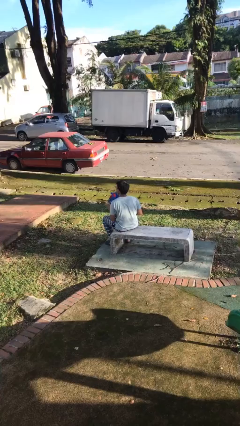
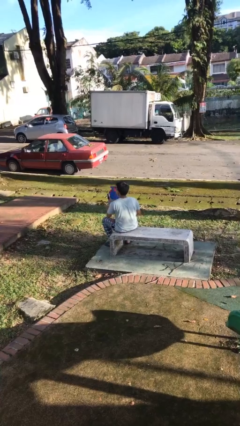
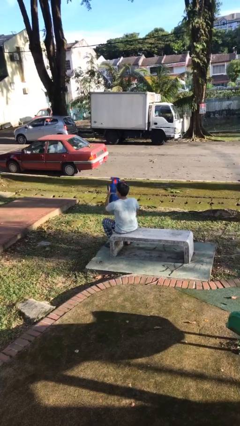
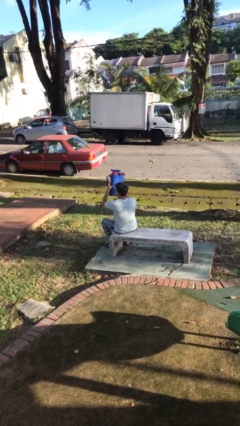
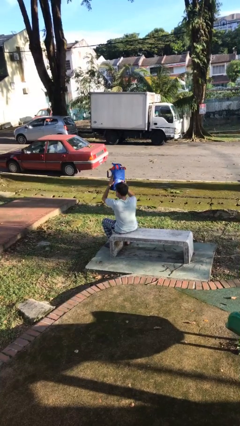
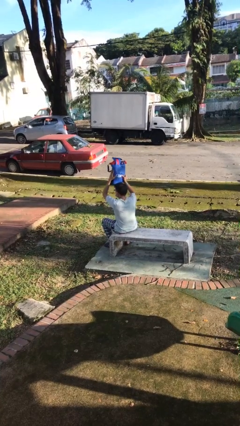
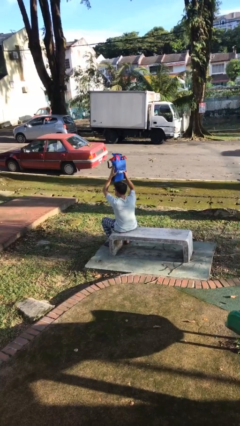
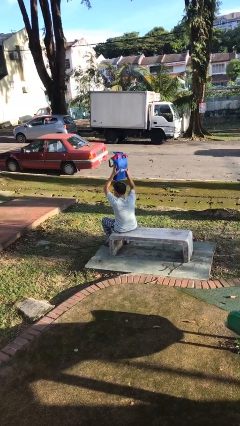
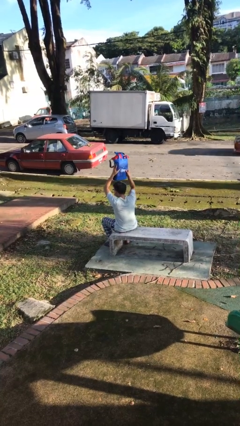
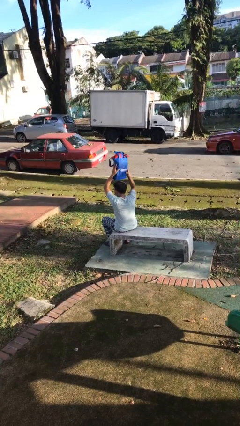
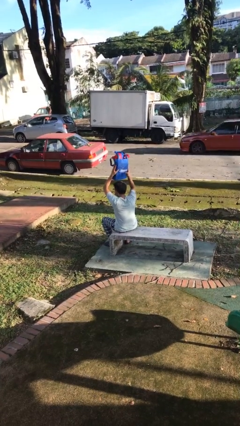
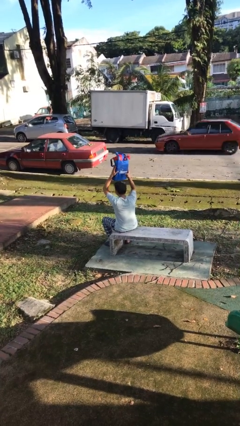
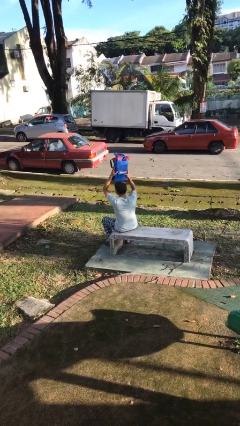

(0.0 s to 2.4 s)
person holds object above head

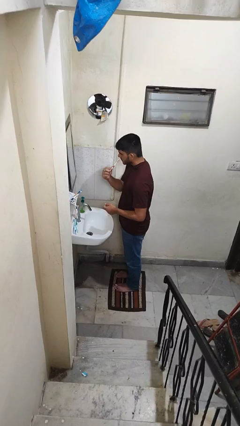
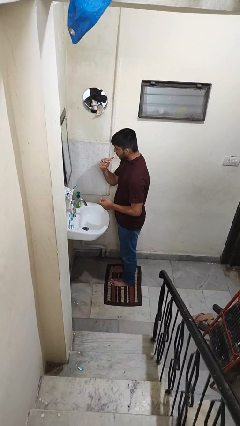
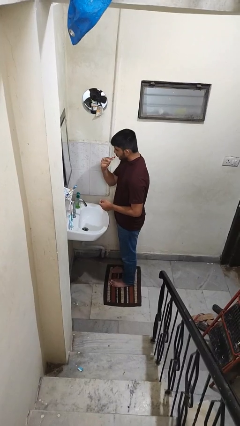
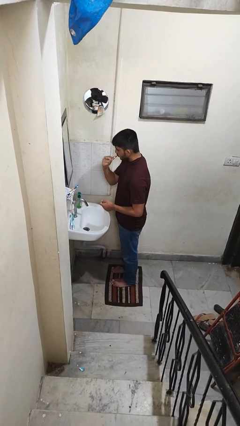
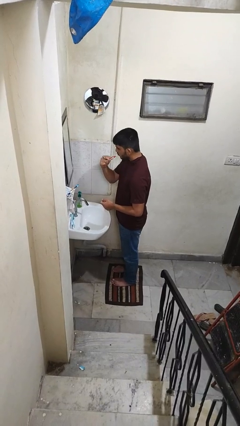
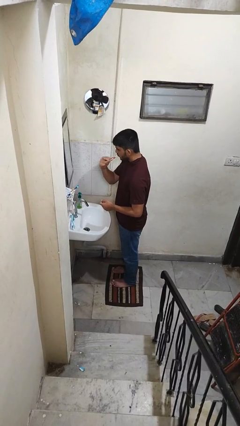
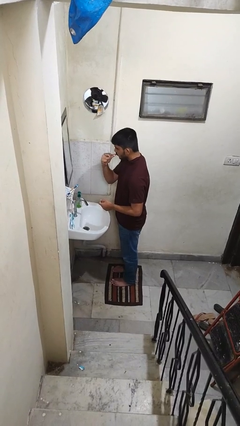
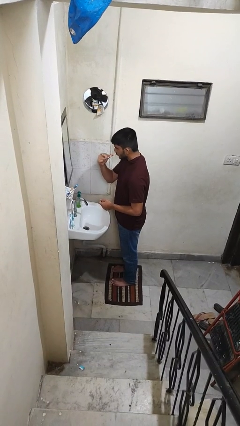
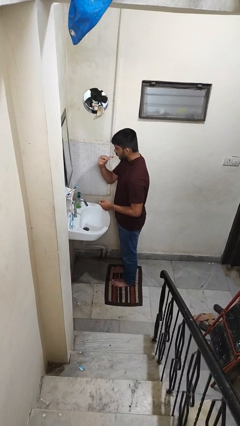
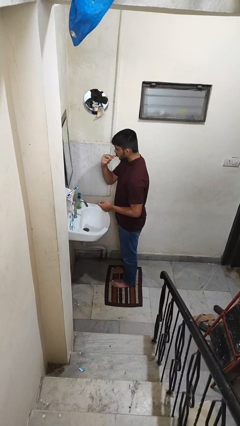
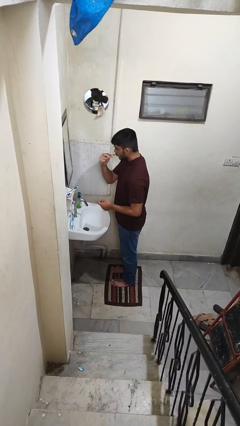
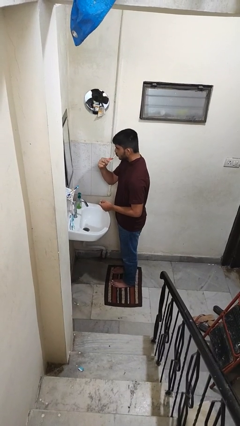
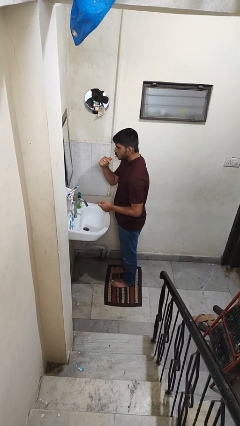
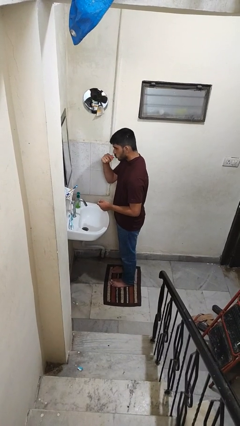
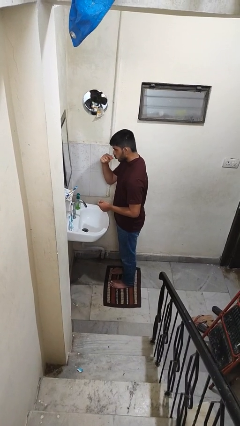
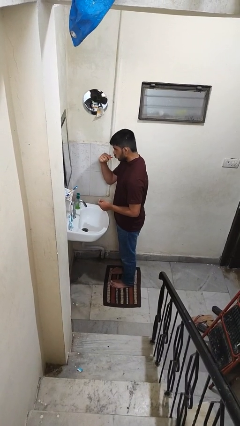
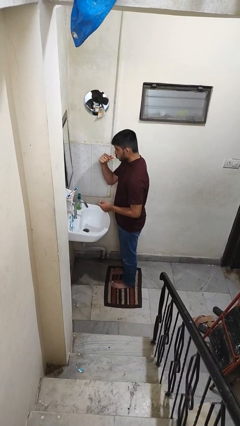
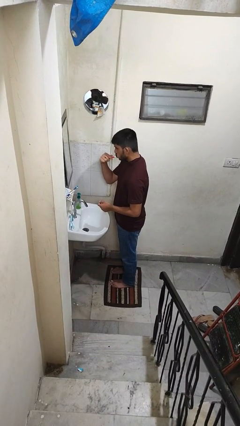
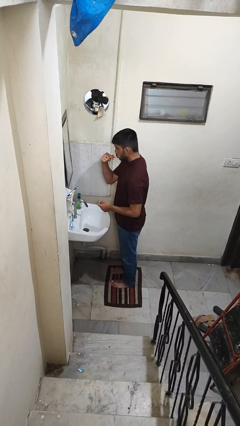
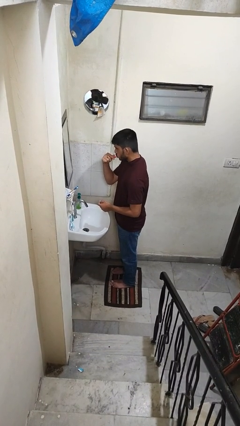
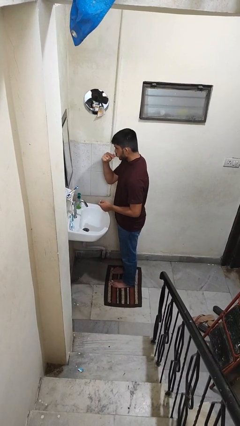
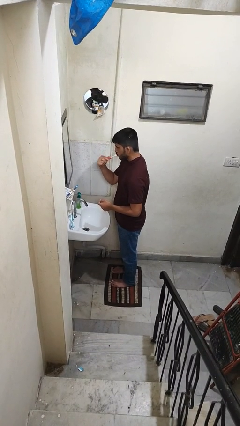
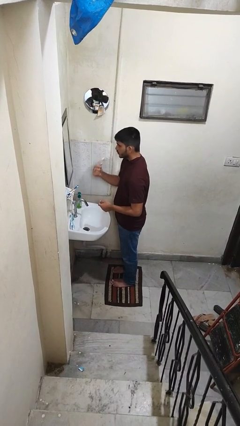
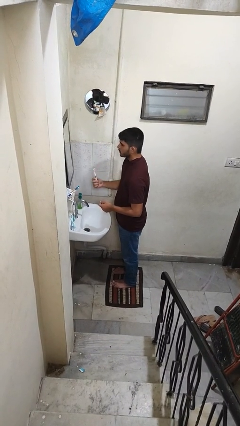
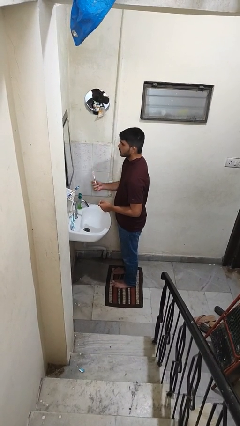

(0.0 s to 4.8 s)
person brushes teeth

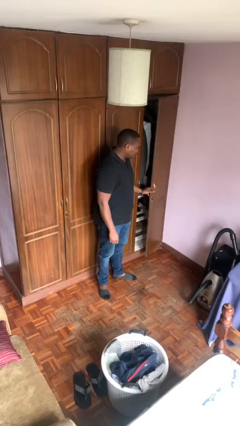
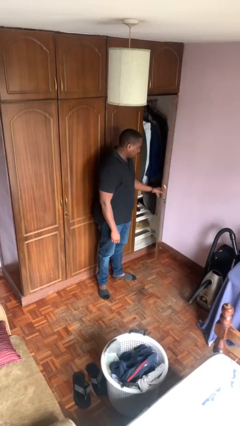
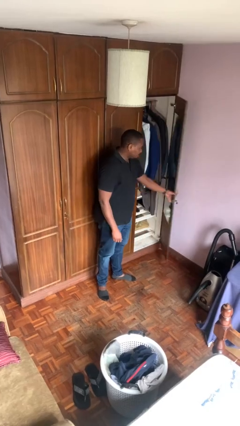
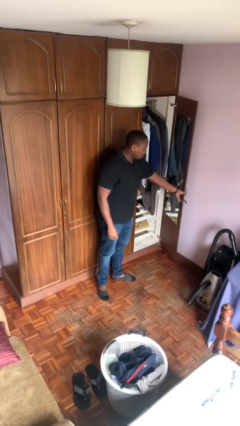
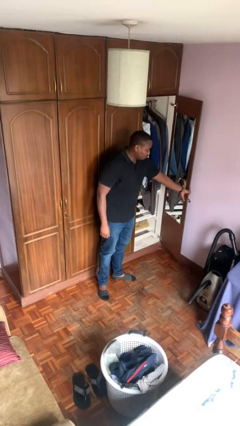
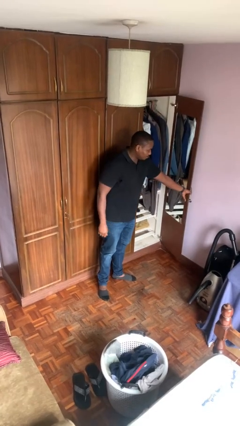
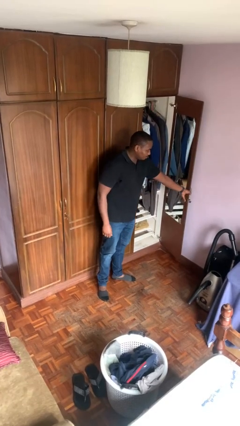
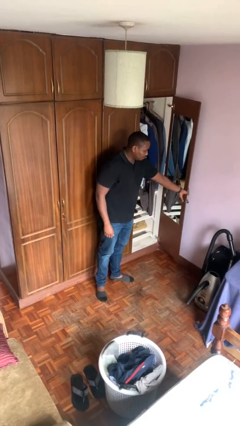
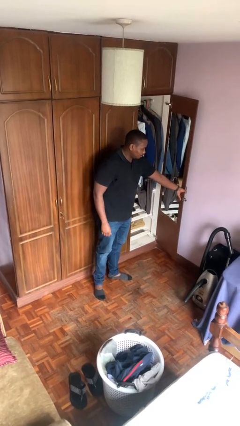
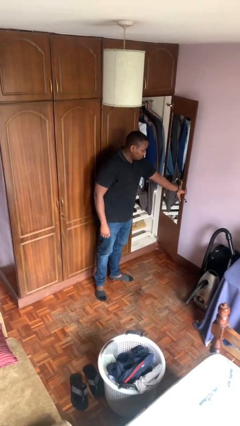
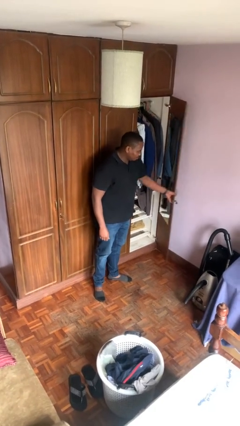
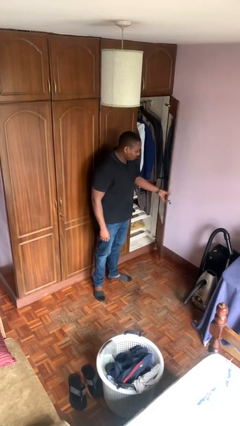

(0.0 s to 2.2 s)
person opens closet door

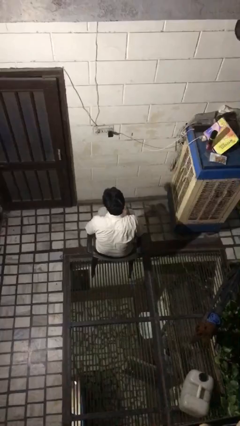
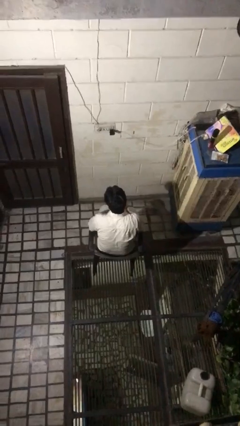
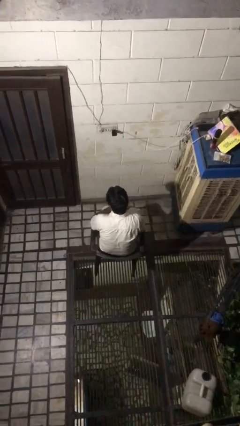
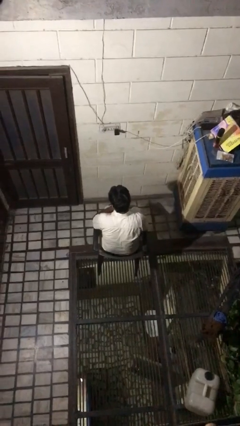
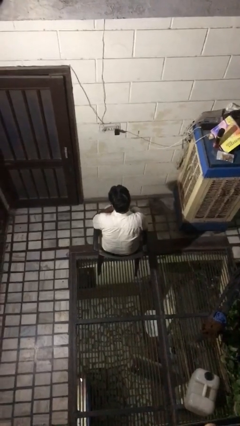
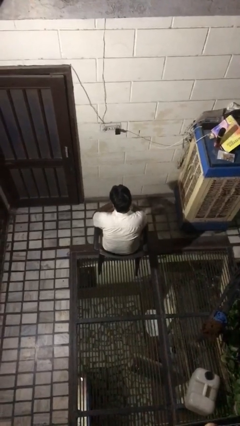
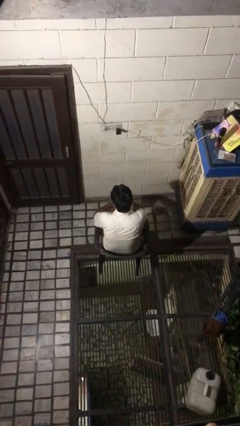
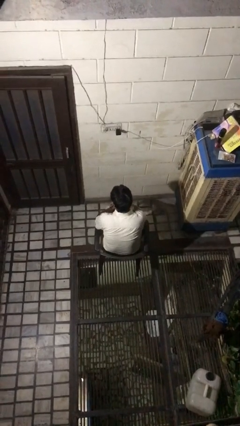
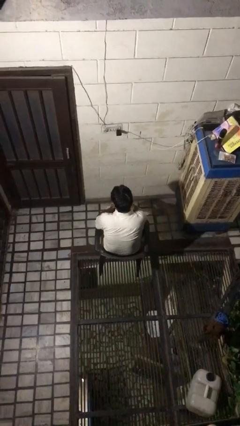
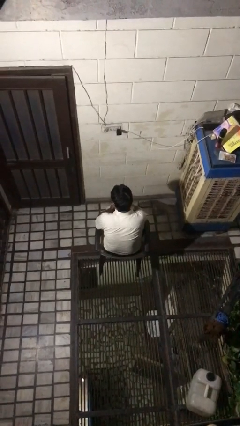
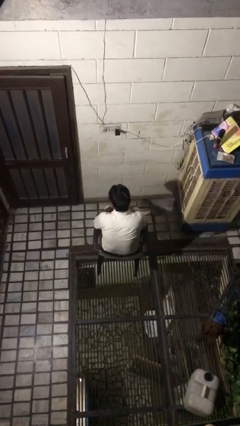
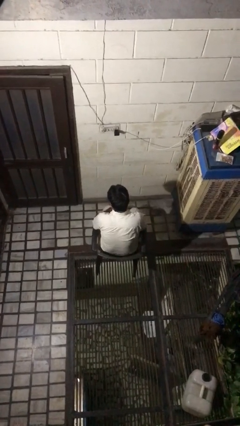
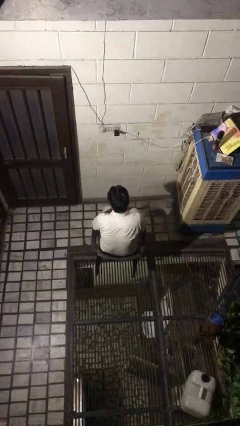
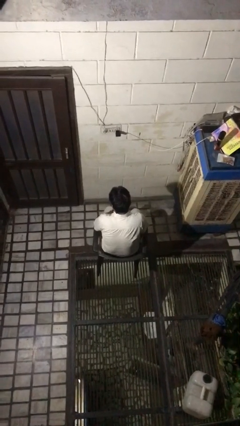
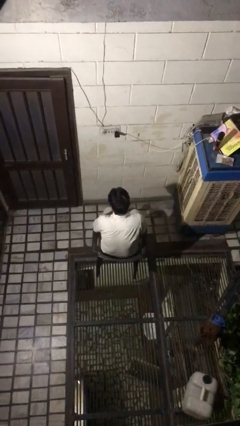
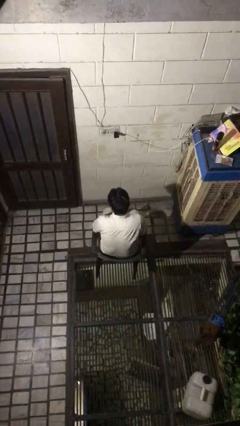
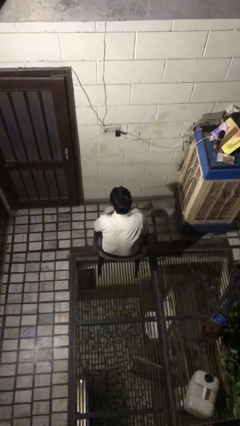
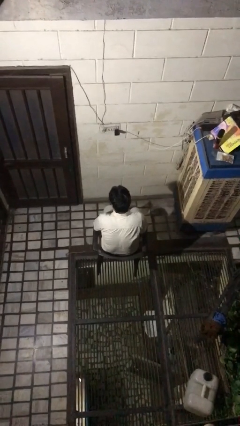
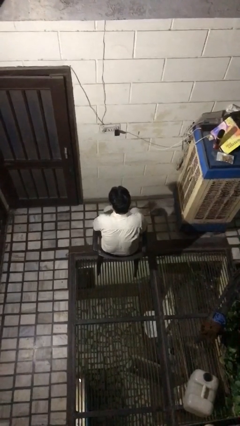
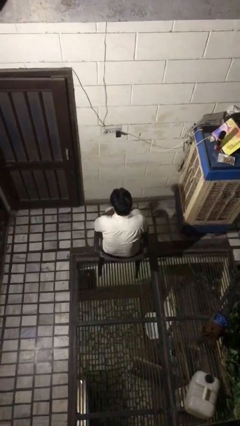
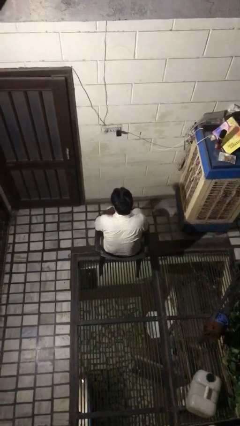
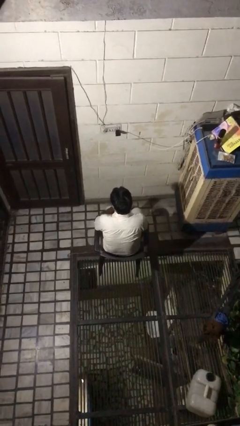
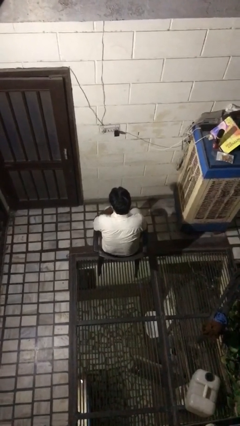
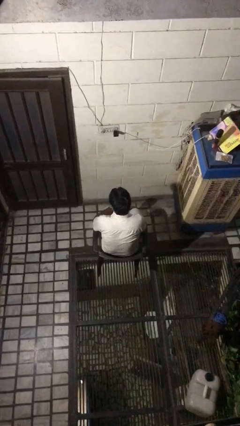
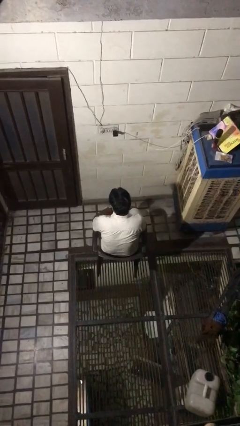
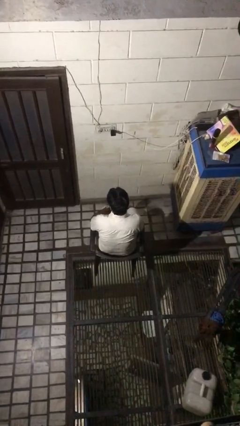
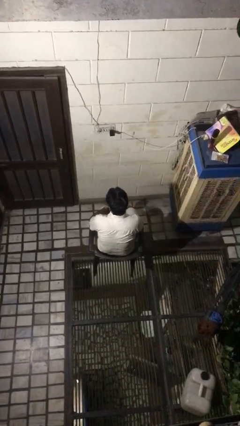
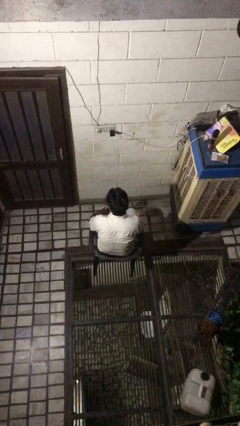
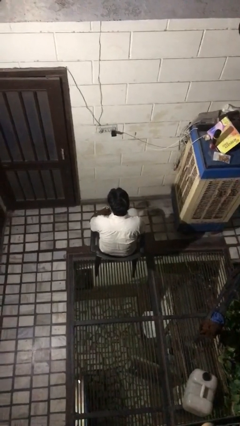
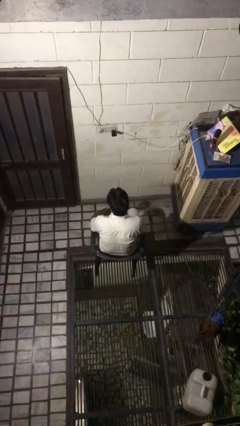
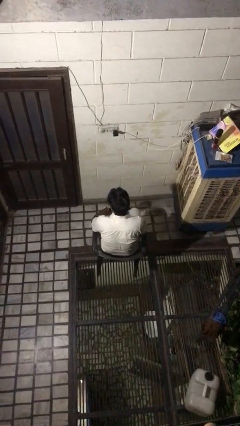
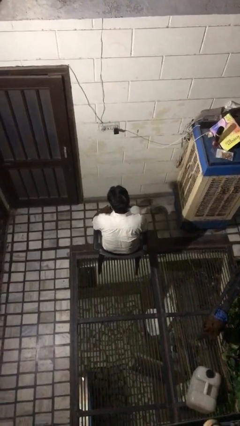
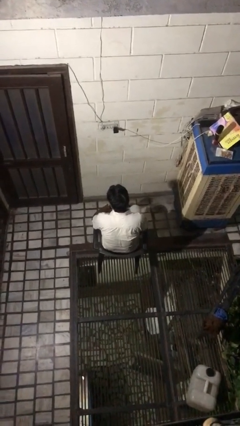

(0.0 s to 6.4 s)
person puts on wristwatch

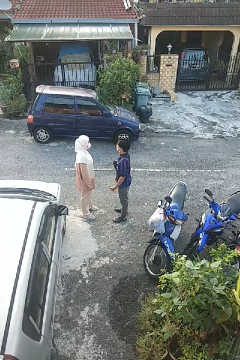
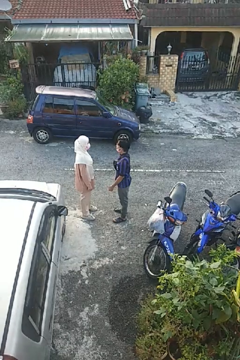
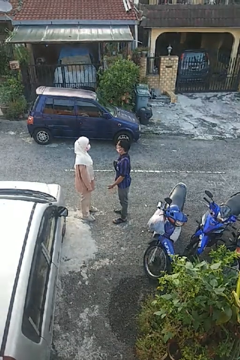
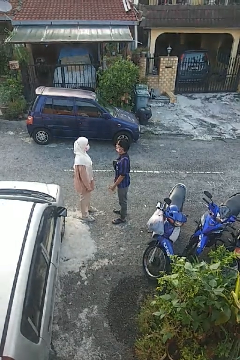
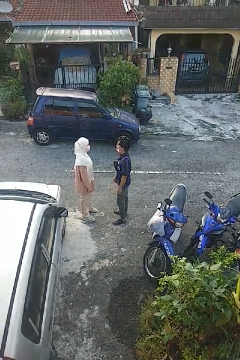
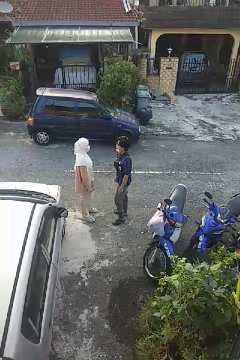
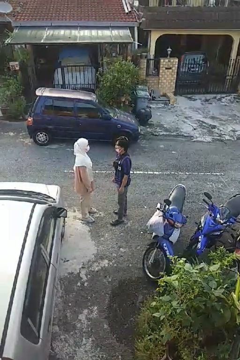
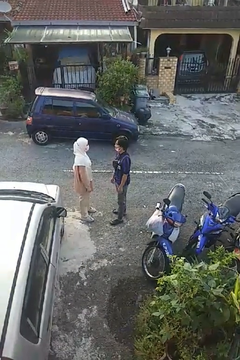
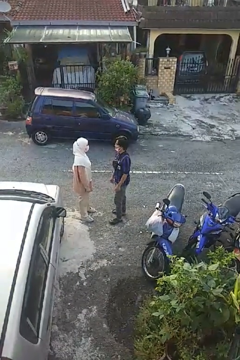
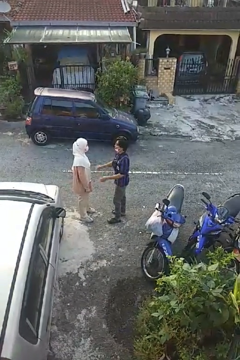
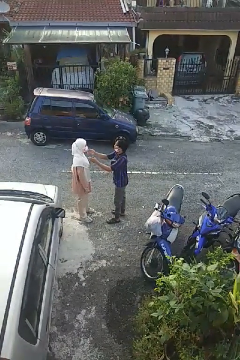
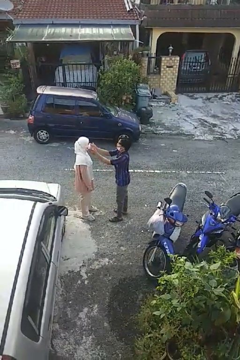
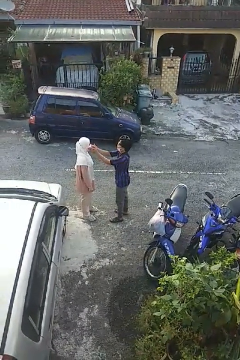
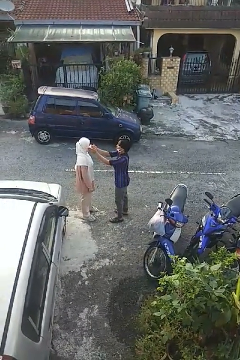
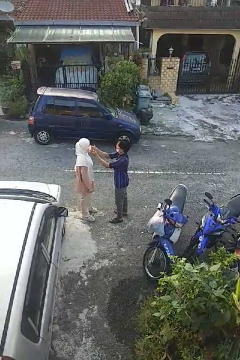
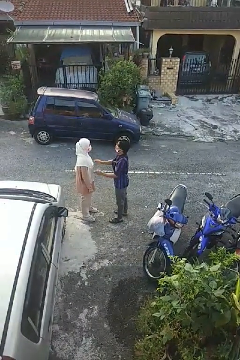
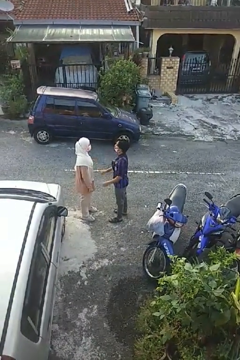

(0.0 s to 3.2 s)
person touches face of person
